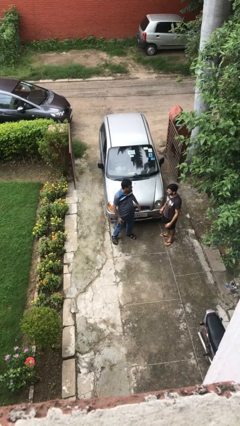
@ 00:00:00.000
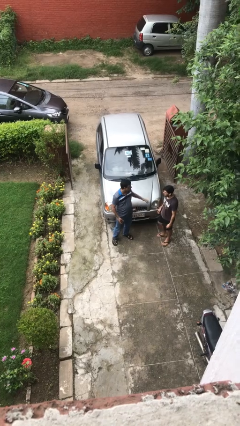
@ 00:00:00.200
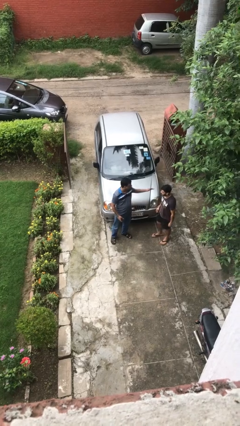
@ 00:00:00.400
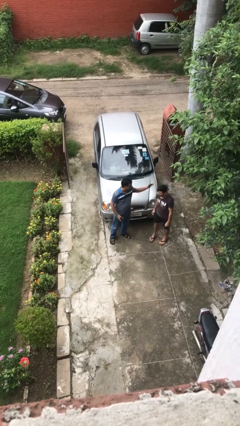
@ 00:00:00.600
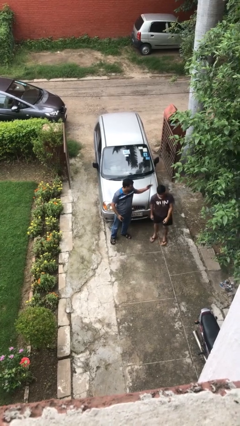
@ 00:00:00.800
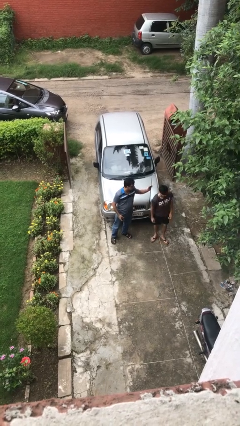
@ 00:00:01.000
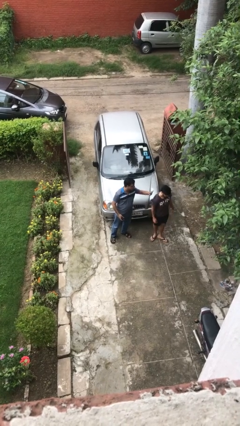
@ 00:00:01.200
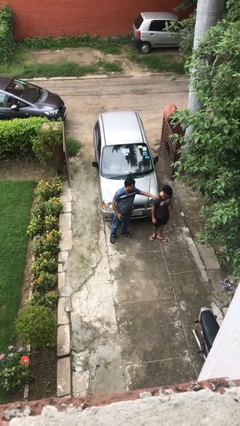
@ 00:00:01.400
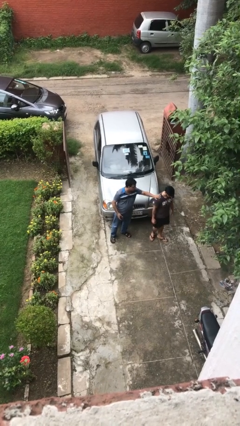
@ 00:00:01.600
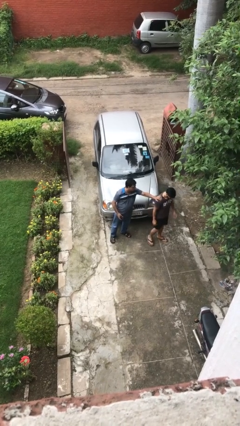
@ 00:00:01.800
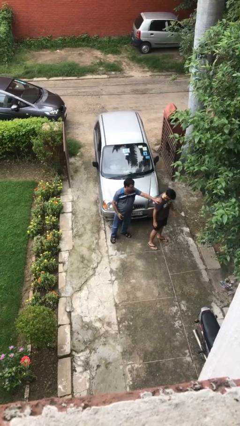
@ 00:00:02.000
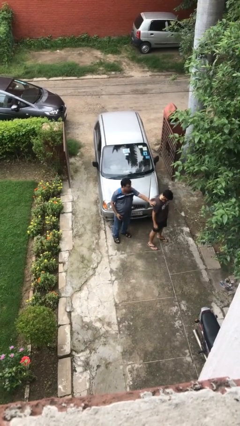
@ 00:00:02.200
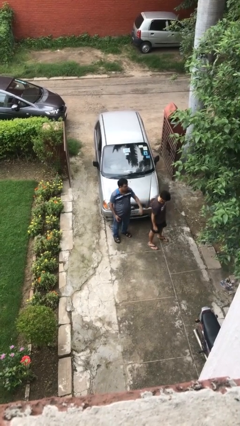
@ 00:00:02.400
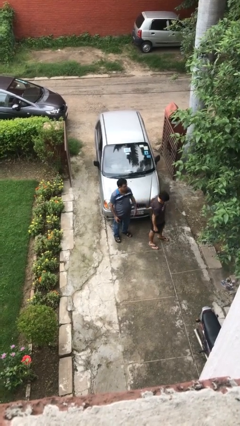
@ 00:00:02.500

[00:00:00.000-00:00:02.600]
person touches back of person

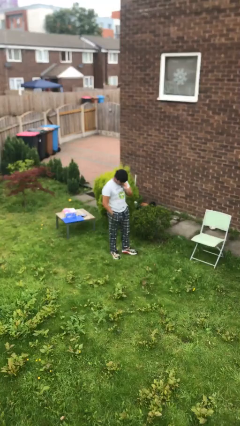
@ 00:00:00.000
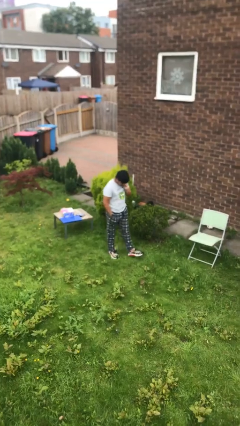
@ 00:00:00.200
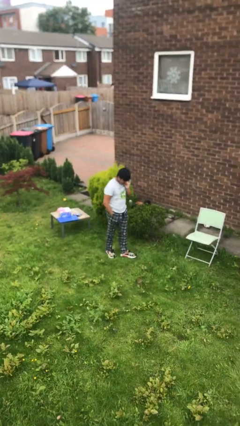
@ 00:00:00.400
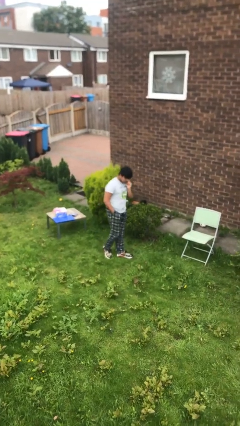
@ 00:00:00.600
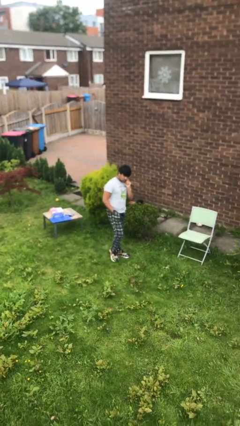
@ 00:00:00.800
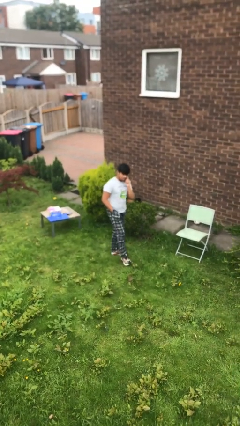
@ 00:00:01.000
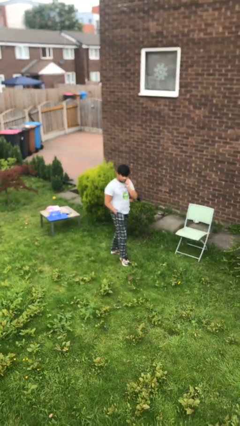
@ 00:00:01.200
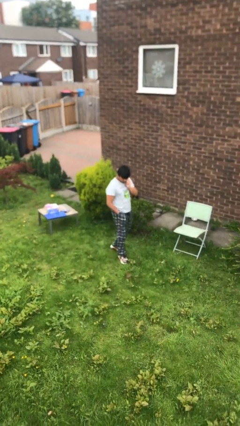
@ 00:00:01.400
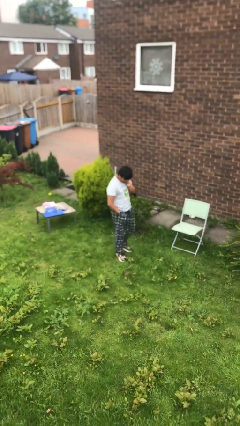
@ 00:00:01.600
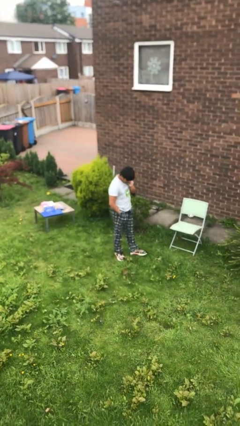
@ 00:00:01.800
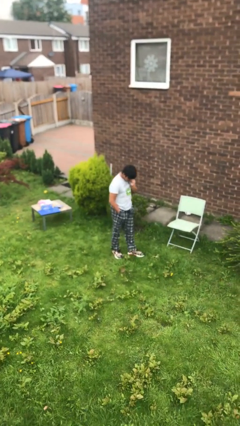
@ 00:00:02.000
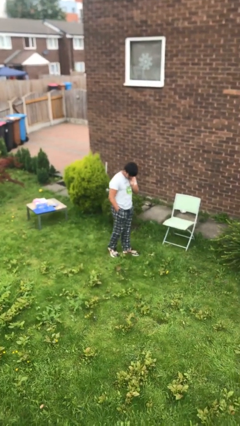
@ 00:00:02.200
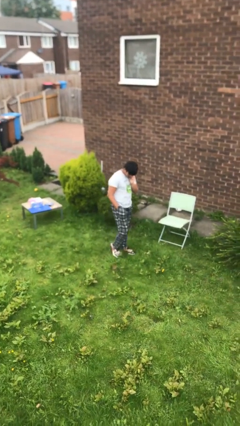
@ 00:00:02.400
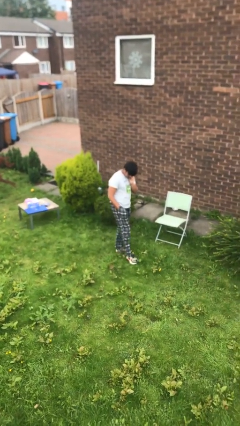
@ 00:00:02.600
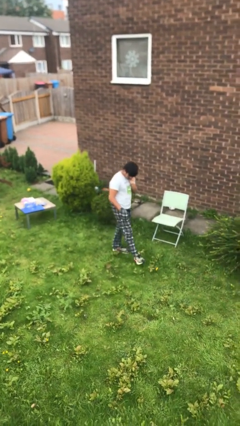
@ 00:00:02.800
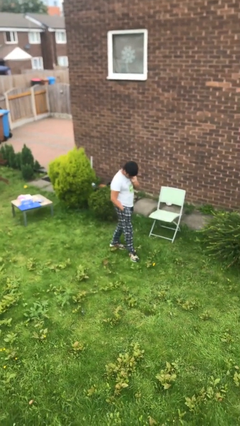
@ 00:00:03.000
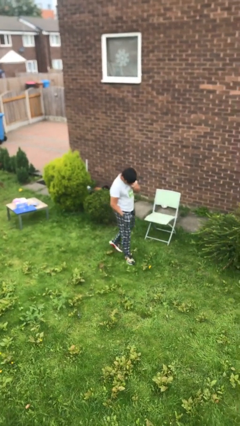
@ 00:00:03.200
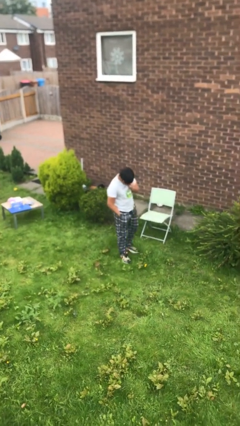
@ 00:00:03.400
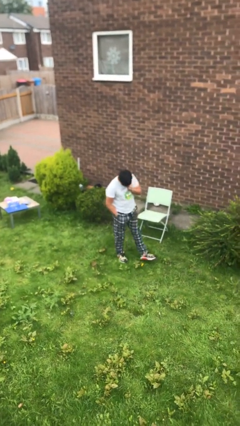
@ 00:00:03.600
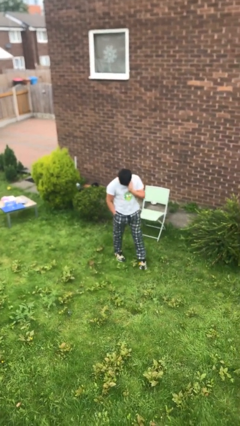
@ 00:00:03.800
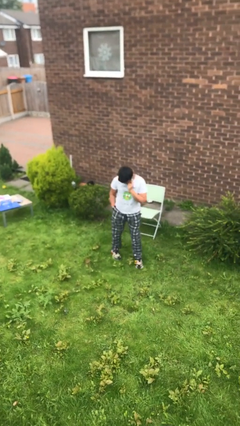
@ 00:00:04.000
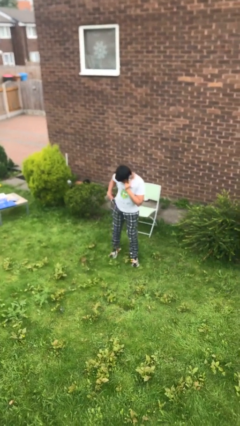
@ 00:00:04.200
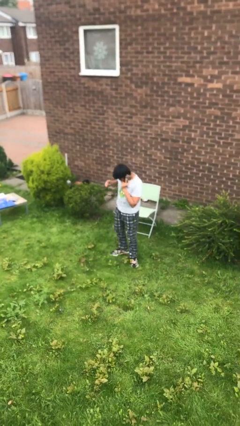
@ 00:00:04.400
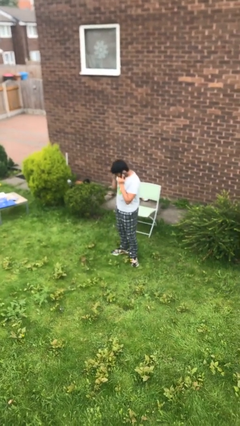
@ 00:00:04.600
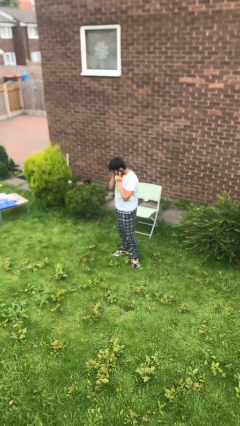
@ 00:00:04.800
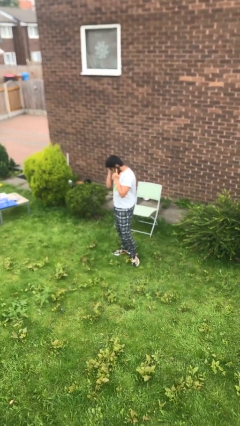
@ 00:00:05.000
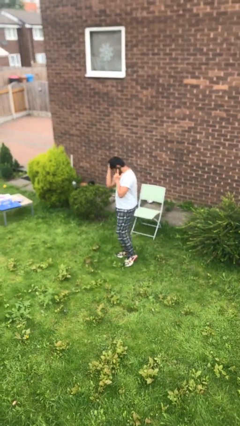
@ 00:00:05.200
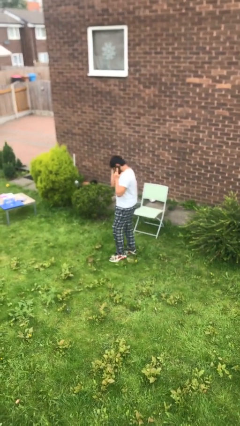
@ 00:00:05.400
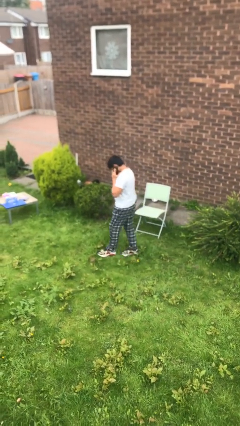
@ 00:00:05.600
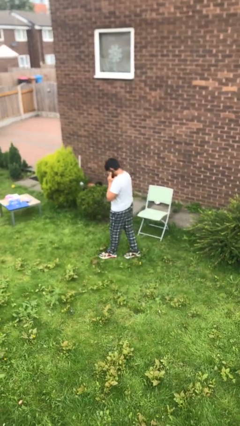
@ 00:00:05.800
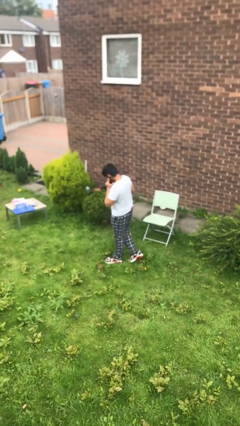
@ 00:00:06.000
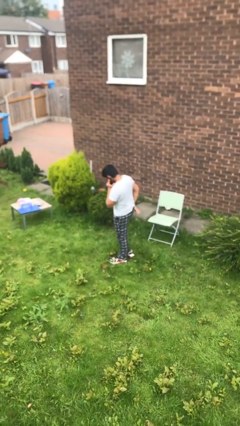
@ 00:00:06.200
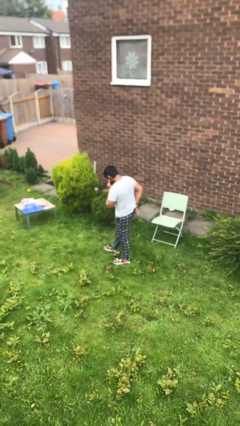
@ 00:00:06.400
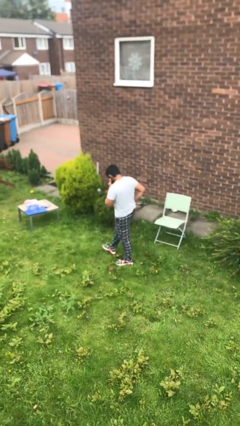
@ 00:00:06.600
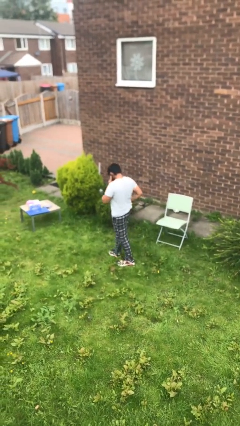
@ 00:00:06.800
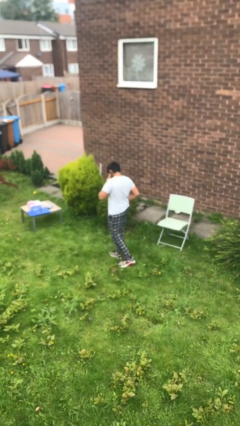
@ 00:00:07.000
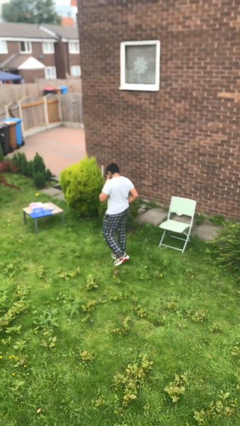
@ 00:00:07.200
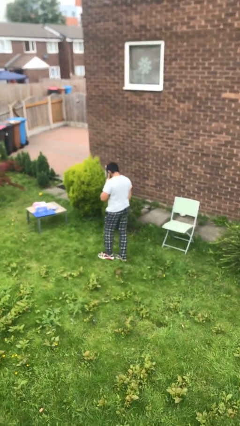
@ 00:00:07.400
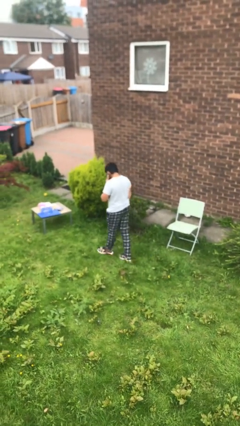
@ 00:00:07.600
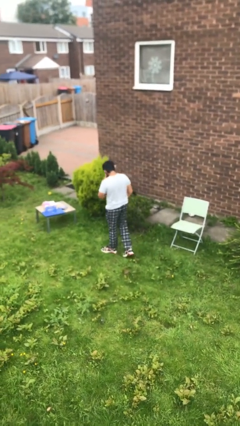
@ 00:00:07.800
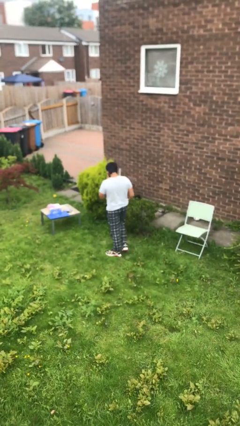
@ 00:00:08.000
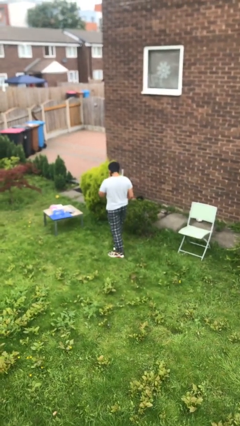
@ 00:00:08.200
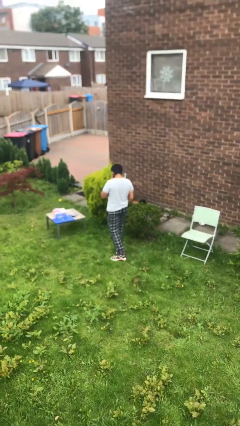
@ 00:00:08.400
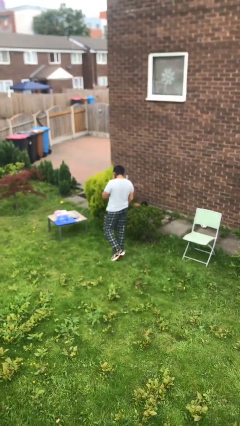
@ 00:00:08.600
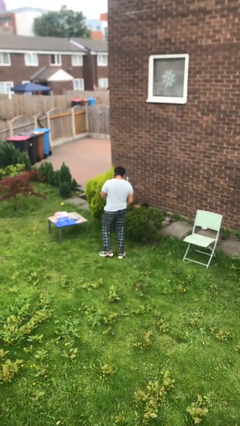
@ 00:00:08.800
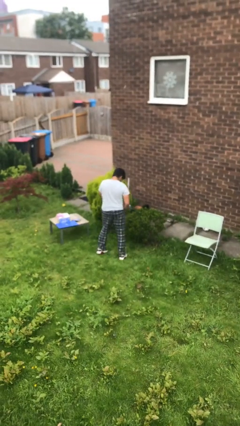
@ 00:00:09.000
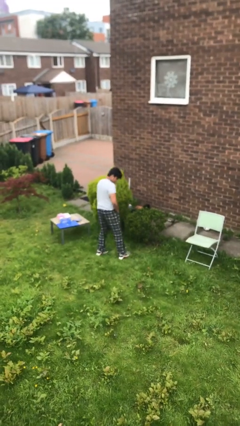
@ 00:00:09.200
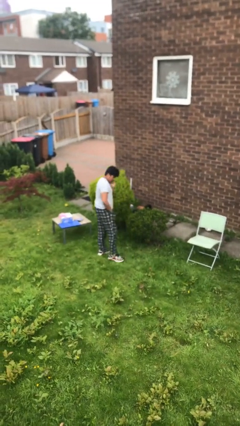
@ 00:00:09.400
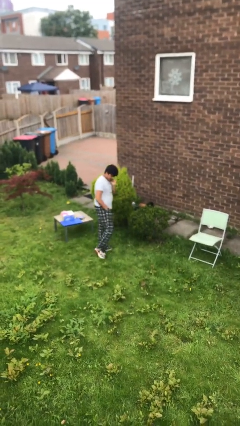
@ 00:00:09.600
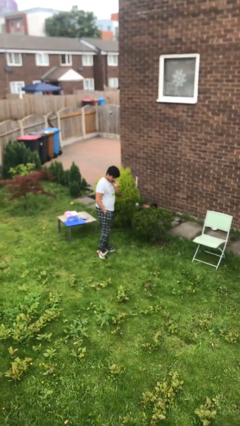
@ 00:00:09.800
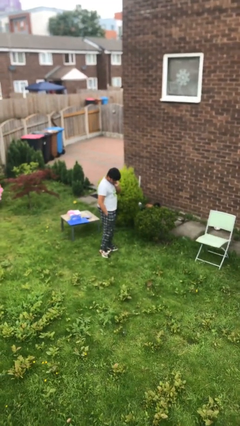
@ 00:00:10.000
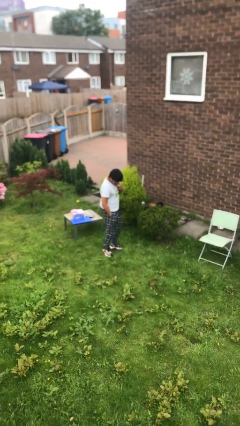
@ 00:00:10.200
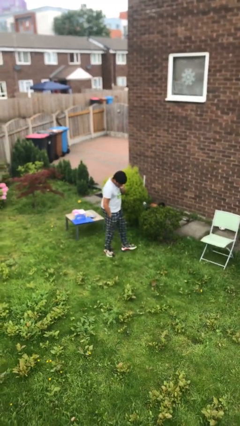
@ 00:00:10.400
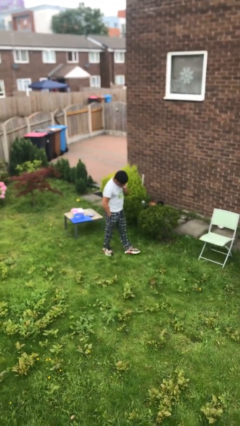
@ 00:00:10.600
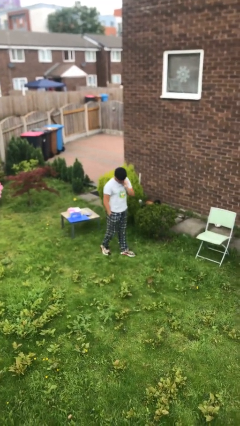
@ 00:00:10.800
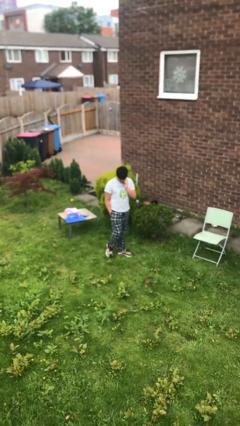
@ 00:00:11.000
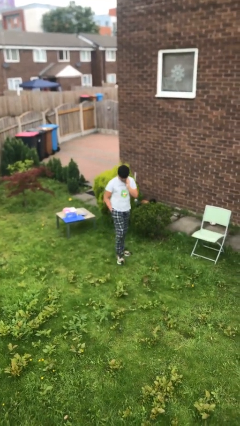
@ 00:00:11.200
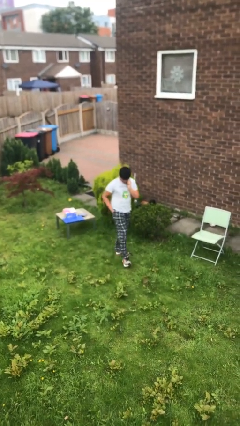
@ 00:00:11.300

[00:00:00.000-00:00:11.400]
person talks on phone

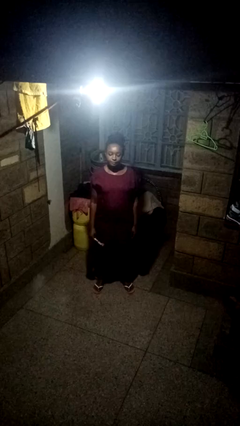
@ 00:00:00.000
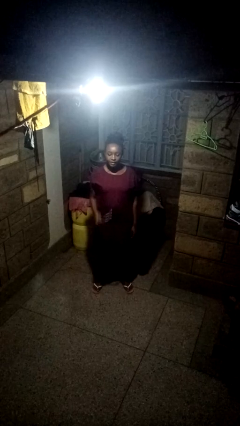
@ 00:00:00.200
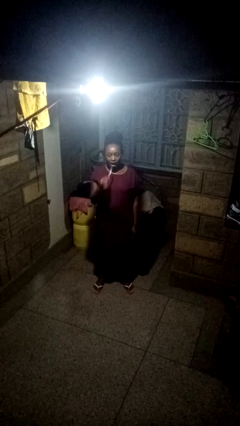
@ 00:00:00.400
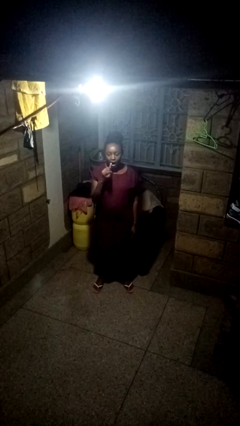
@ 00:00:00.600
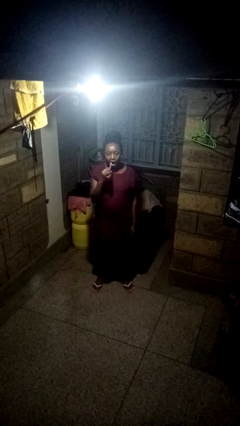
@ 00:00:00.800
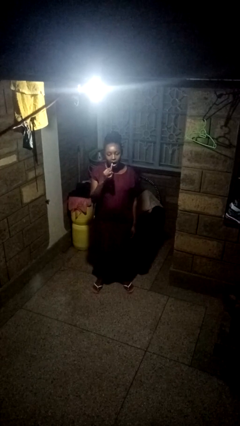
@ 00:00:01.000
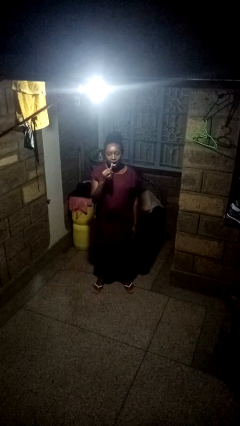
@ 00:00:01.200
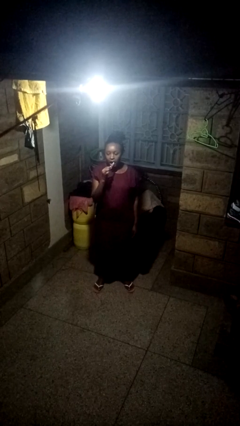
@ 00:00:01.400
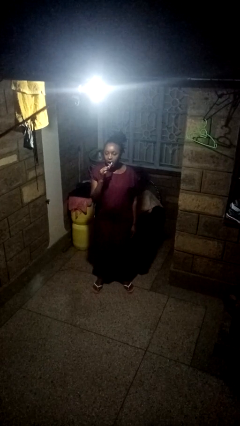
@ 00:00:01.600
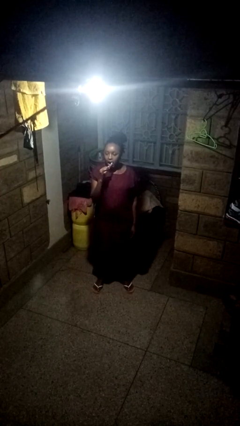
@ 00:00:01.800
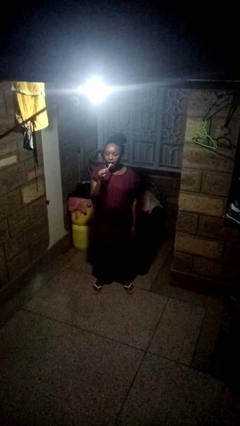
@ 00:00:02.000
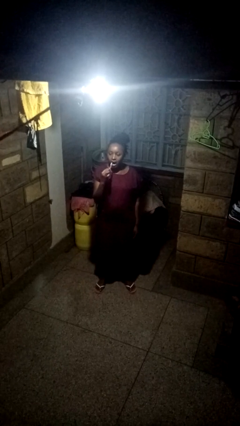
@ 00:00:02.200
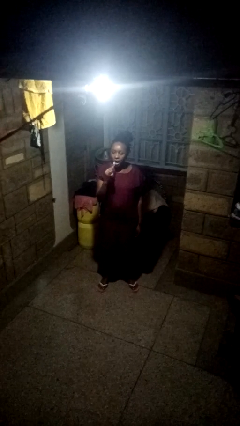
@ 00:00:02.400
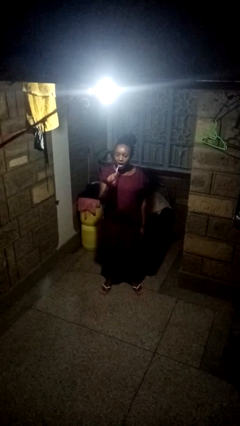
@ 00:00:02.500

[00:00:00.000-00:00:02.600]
person brushes teeth

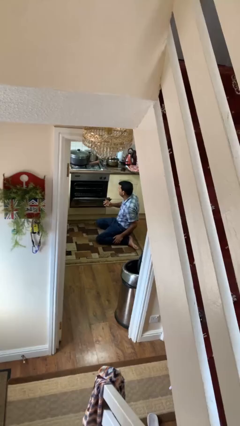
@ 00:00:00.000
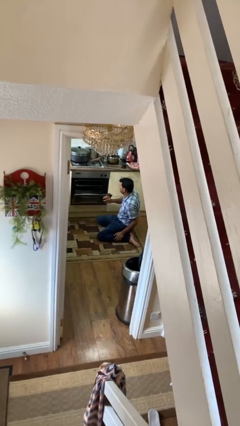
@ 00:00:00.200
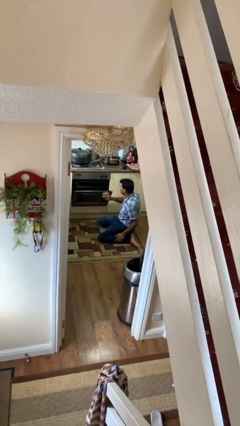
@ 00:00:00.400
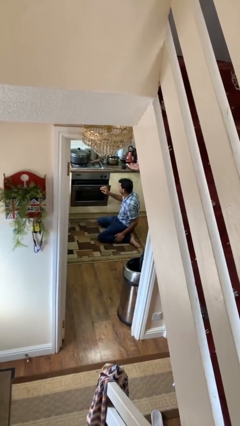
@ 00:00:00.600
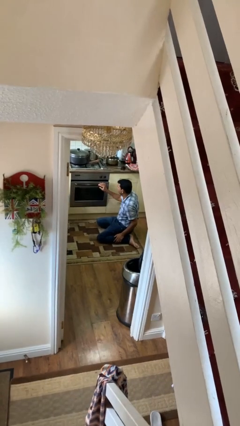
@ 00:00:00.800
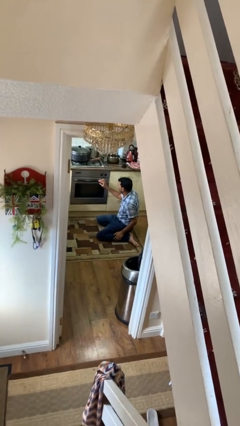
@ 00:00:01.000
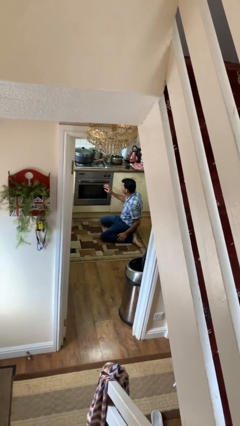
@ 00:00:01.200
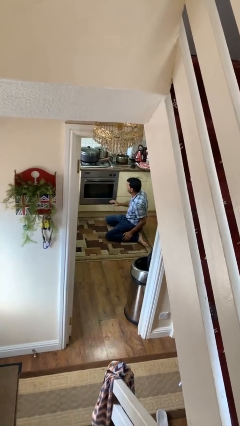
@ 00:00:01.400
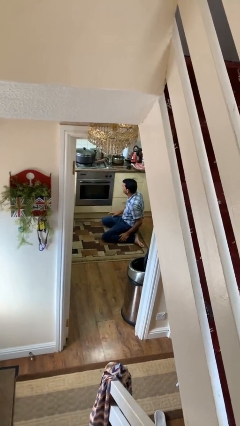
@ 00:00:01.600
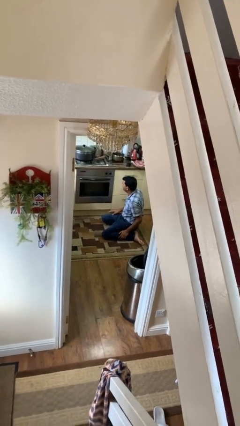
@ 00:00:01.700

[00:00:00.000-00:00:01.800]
person closes oven door
